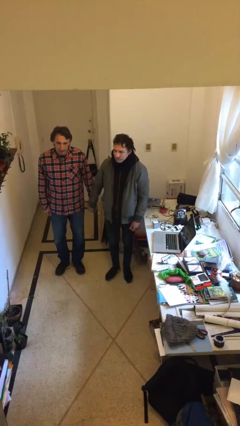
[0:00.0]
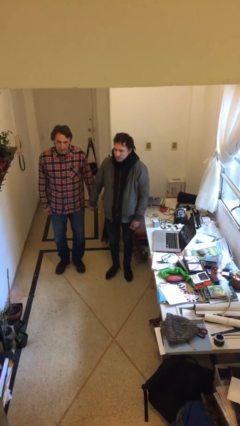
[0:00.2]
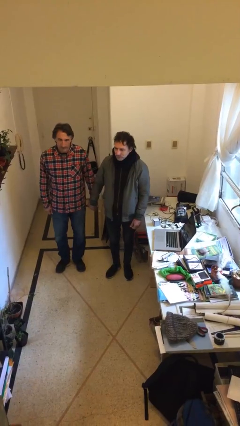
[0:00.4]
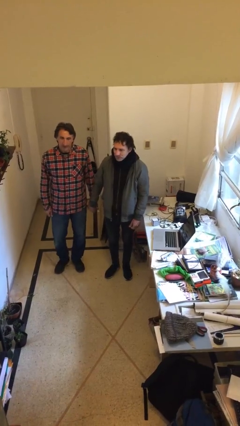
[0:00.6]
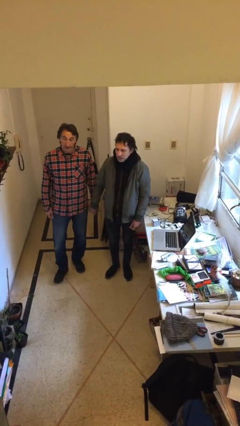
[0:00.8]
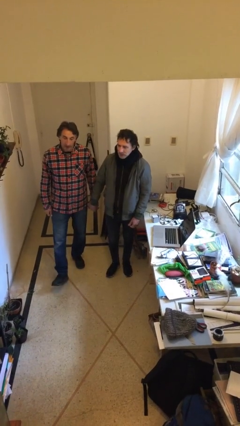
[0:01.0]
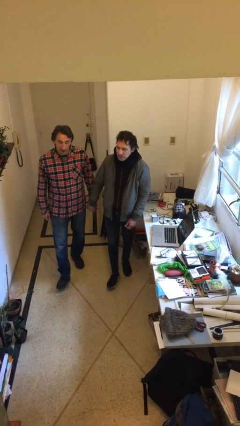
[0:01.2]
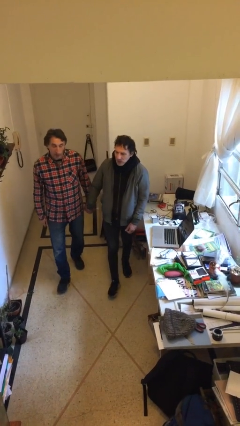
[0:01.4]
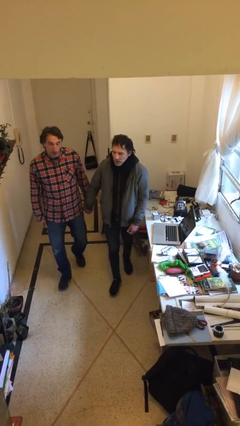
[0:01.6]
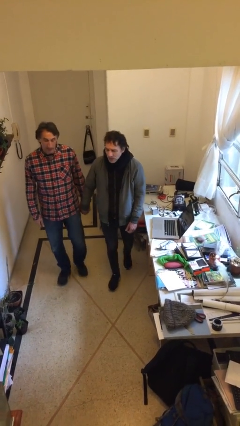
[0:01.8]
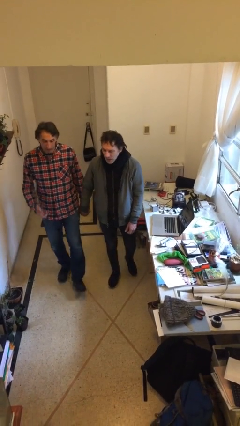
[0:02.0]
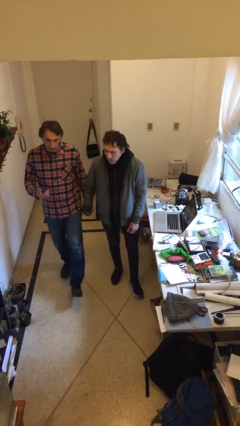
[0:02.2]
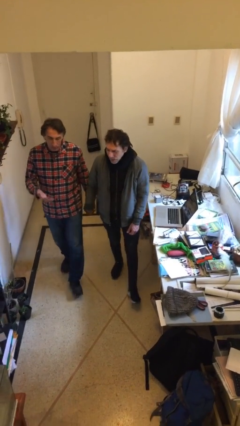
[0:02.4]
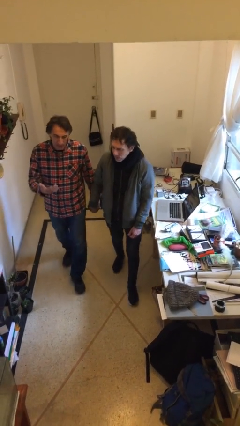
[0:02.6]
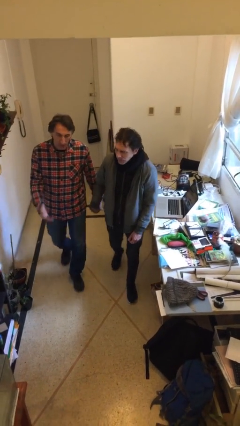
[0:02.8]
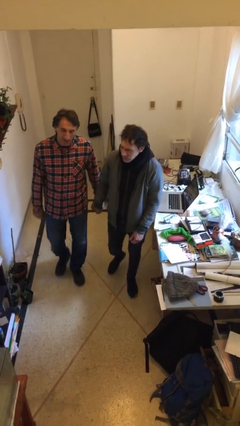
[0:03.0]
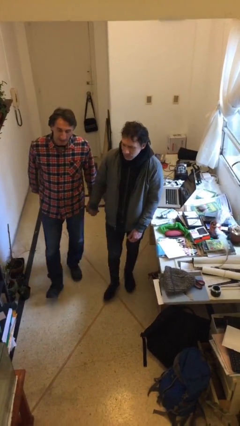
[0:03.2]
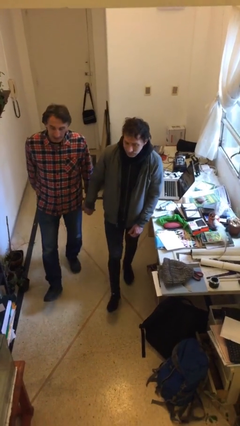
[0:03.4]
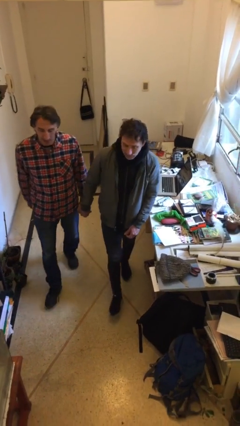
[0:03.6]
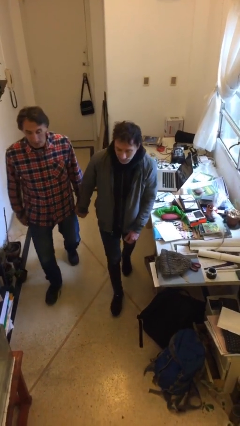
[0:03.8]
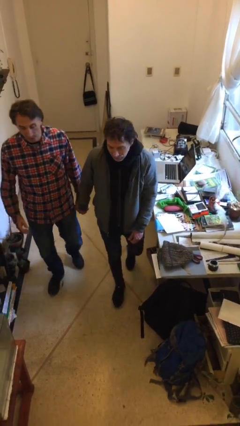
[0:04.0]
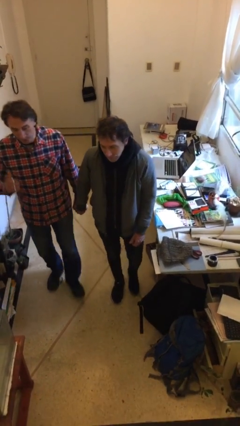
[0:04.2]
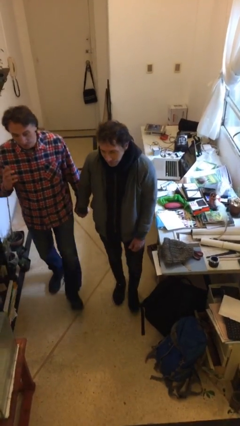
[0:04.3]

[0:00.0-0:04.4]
person holds hand

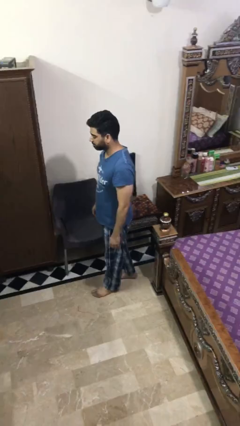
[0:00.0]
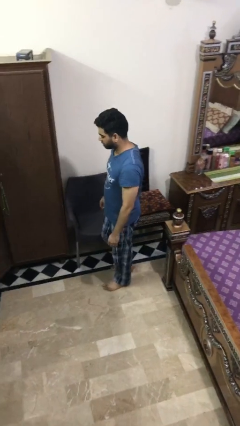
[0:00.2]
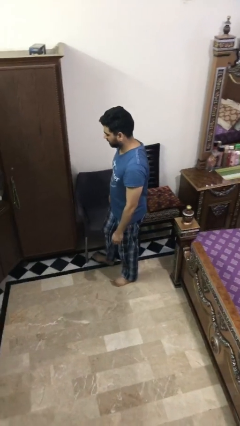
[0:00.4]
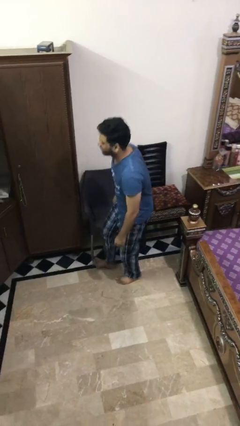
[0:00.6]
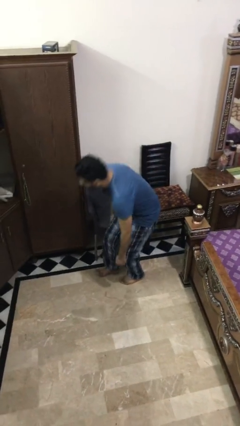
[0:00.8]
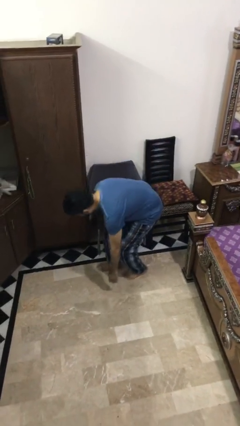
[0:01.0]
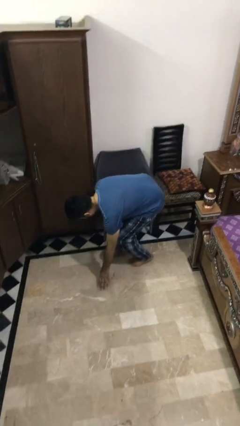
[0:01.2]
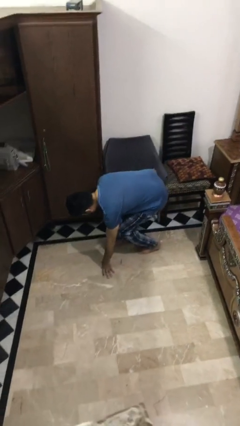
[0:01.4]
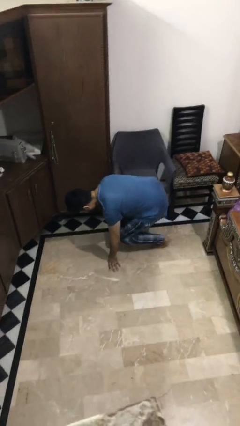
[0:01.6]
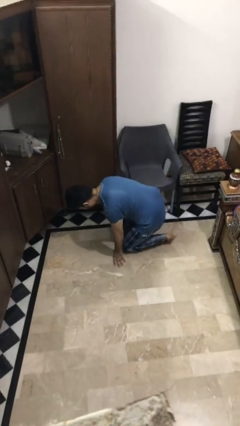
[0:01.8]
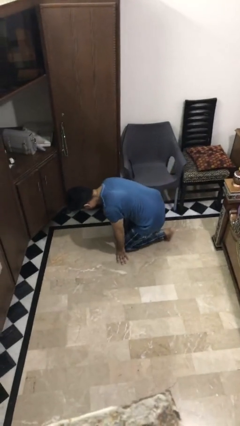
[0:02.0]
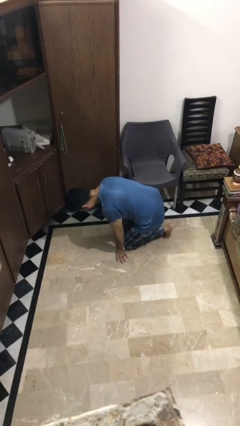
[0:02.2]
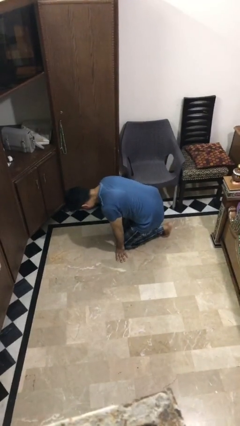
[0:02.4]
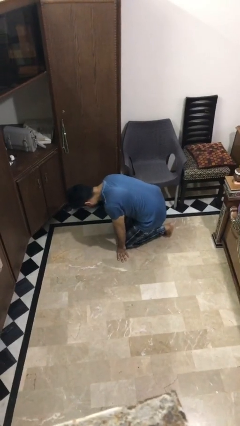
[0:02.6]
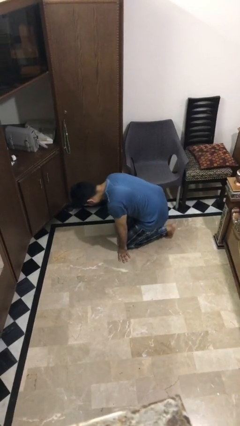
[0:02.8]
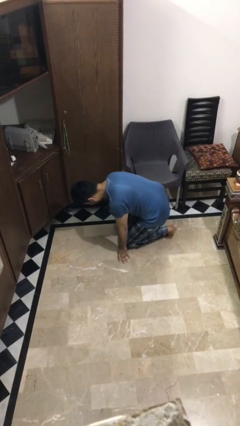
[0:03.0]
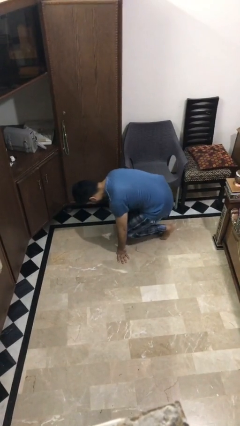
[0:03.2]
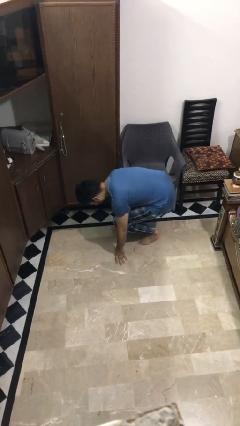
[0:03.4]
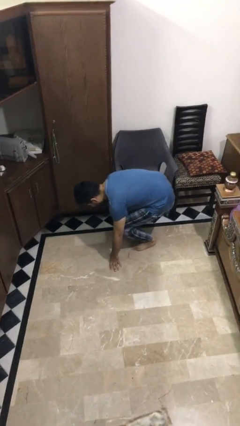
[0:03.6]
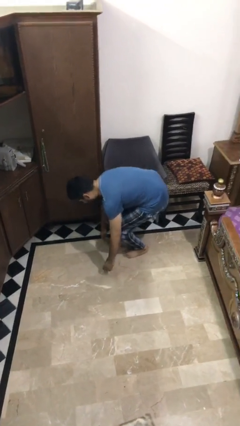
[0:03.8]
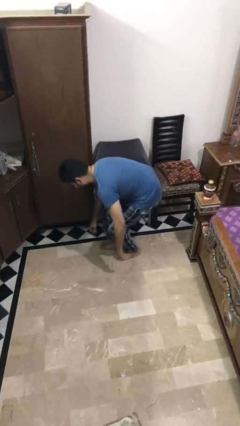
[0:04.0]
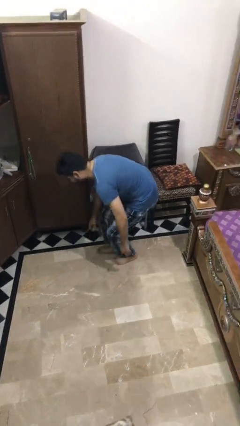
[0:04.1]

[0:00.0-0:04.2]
person stubs toe

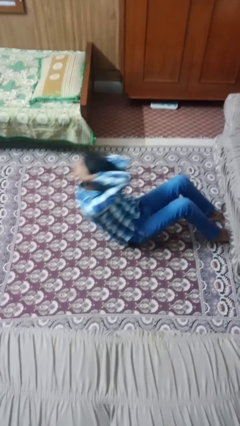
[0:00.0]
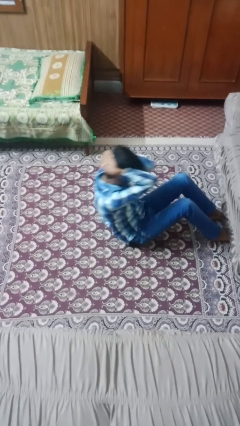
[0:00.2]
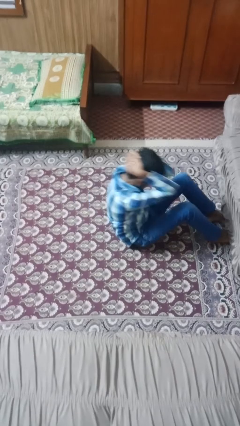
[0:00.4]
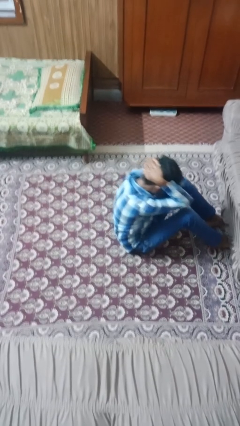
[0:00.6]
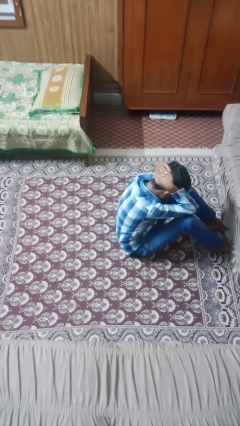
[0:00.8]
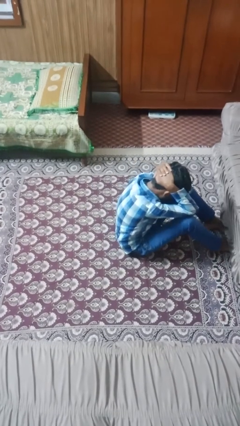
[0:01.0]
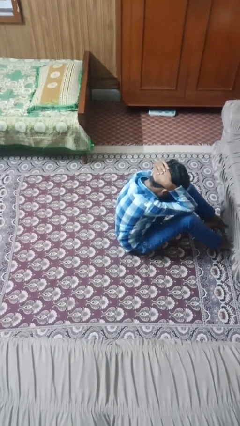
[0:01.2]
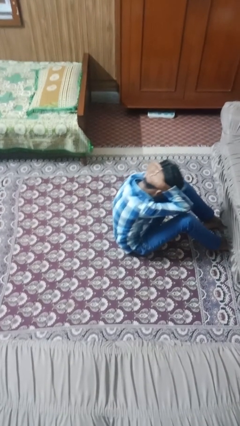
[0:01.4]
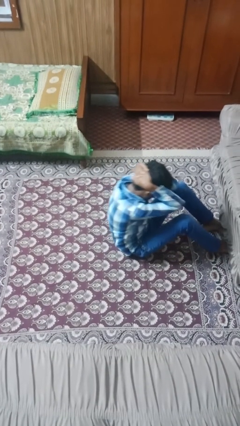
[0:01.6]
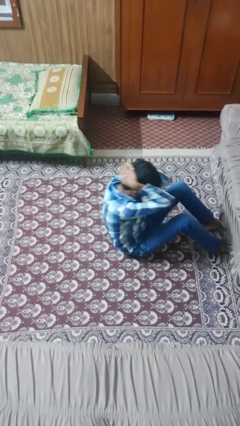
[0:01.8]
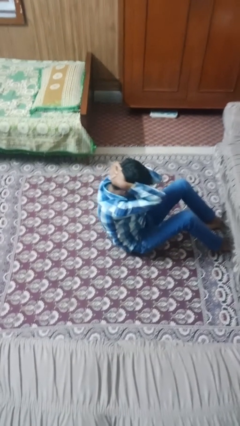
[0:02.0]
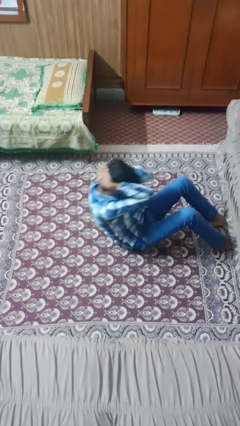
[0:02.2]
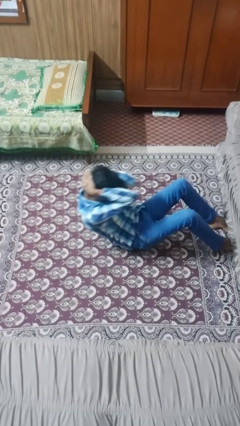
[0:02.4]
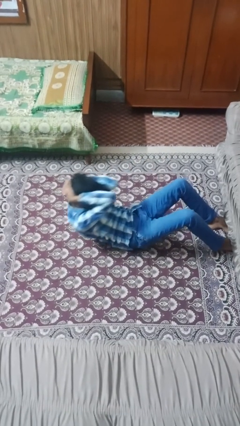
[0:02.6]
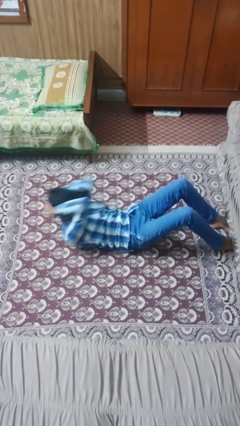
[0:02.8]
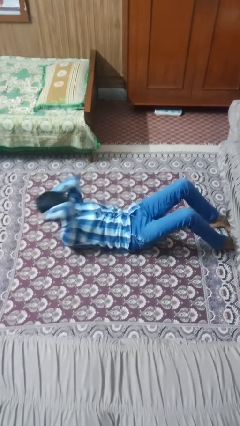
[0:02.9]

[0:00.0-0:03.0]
person exercises with situp

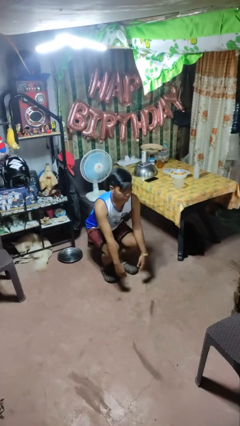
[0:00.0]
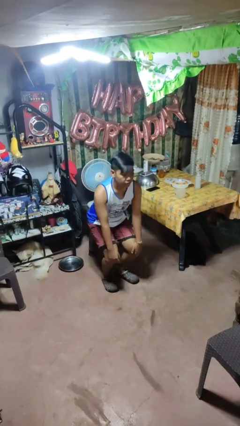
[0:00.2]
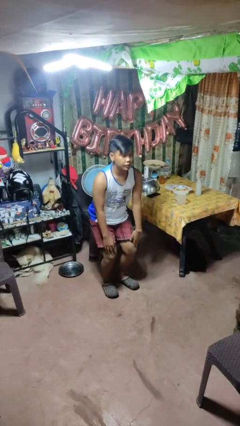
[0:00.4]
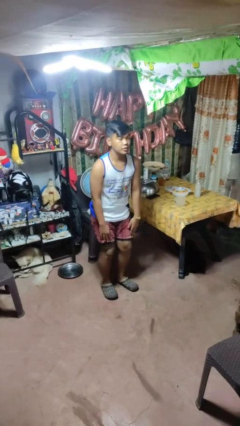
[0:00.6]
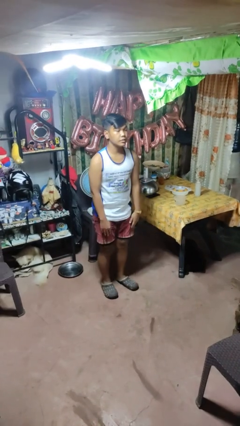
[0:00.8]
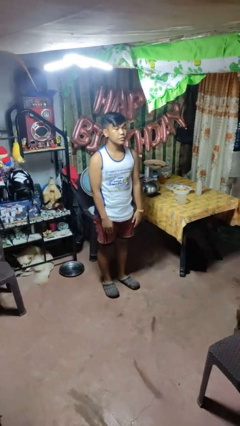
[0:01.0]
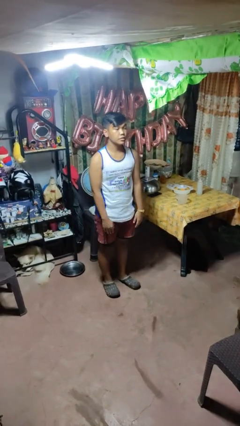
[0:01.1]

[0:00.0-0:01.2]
person stands up

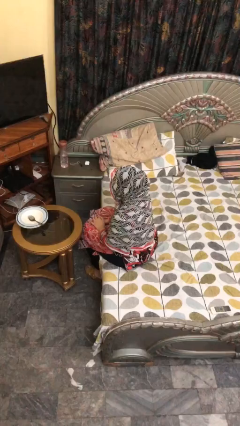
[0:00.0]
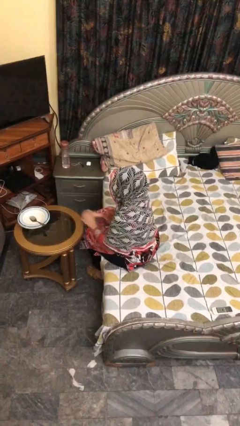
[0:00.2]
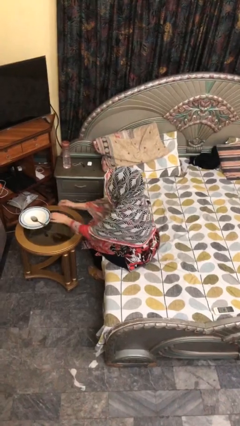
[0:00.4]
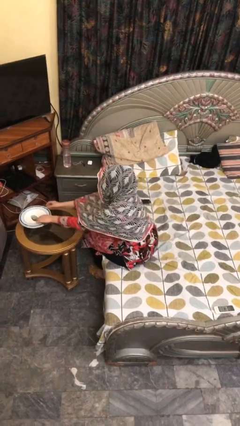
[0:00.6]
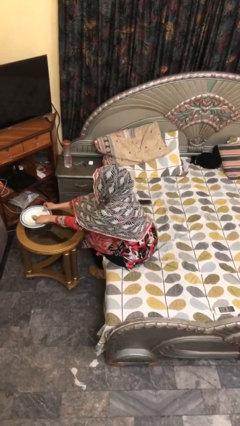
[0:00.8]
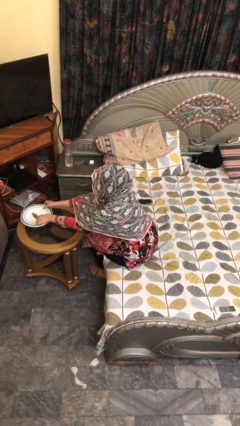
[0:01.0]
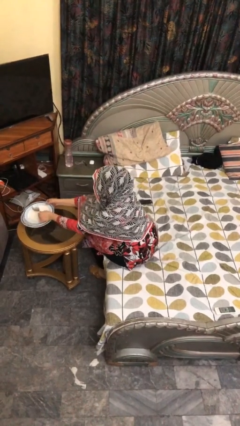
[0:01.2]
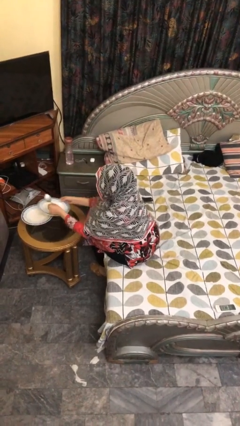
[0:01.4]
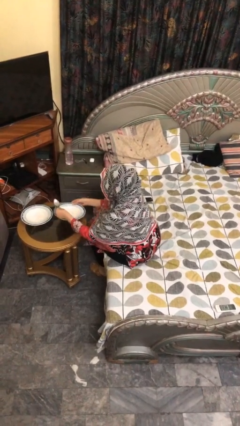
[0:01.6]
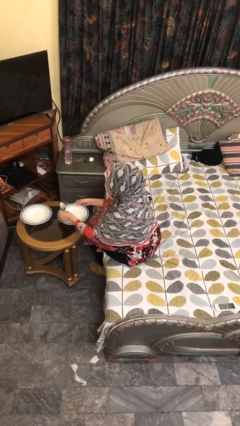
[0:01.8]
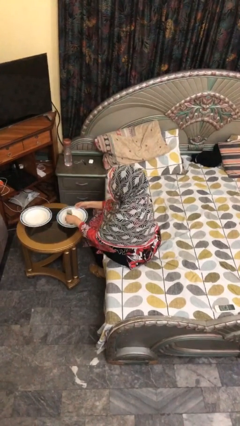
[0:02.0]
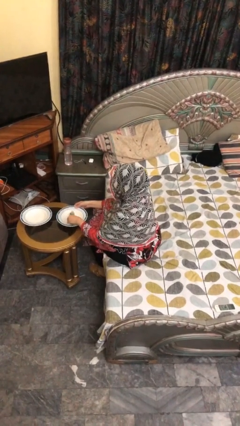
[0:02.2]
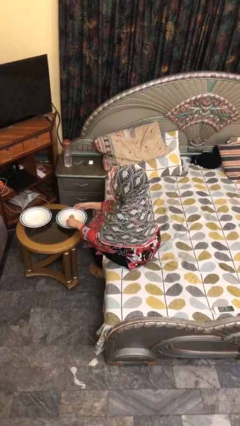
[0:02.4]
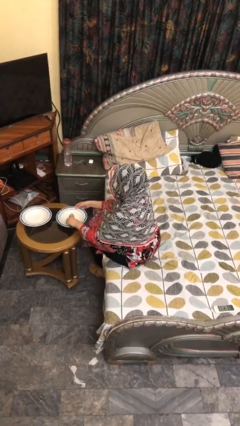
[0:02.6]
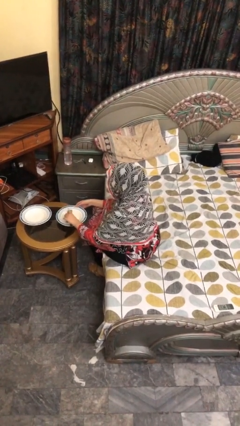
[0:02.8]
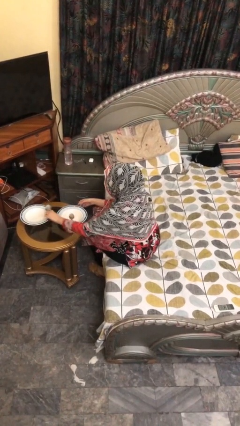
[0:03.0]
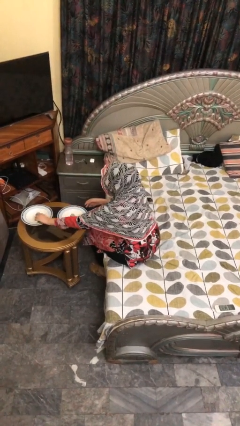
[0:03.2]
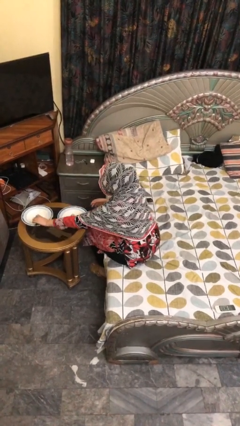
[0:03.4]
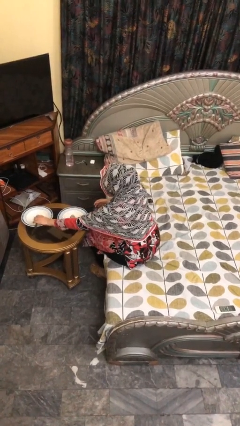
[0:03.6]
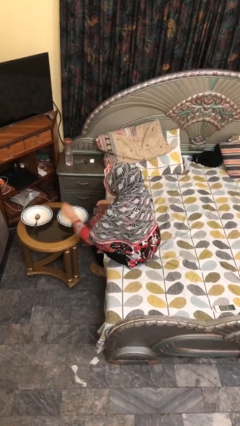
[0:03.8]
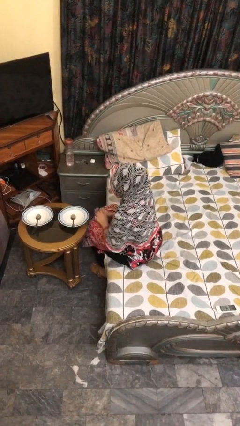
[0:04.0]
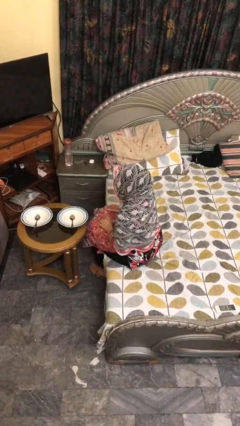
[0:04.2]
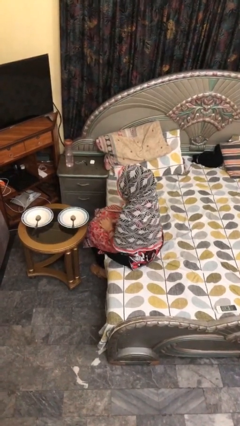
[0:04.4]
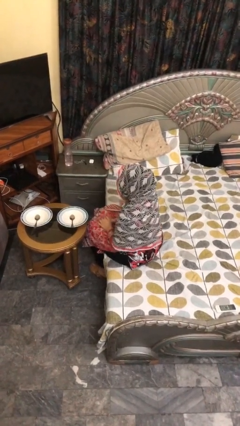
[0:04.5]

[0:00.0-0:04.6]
person sets table

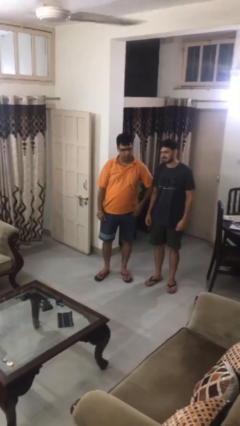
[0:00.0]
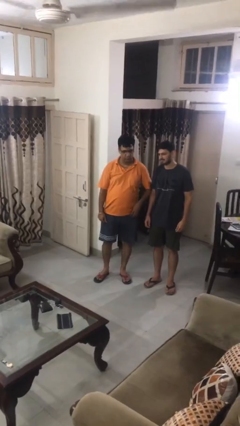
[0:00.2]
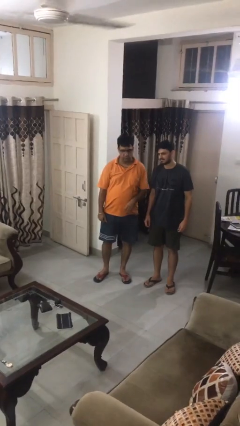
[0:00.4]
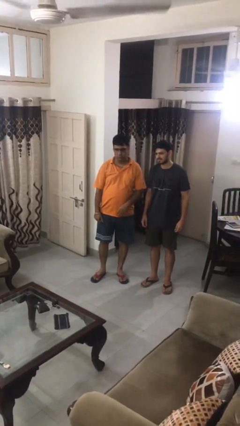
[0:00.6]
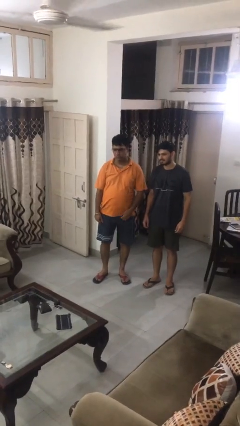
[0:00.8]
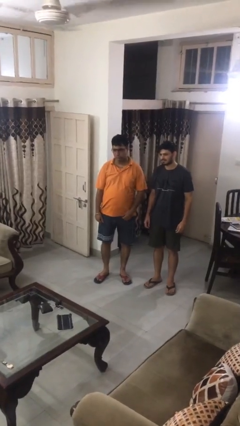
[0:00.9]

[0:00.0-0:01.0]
person nudges person with elbow
